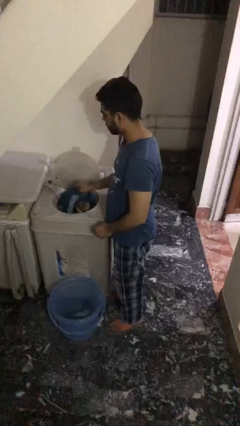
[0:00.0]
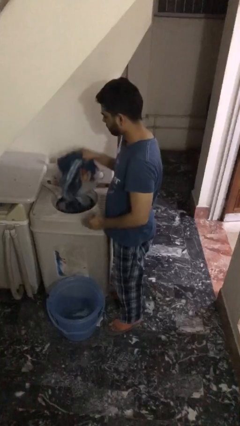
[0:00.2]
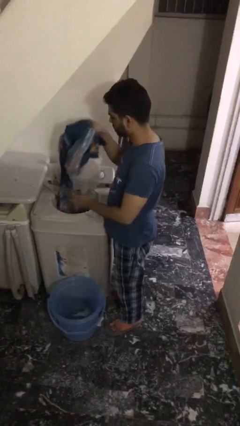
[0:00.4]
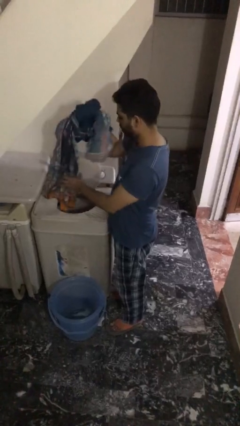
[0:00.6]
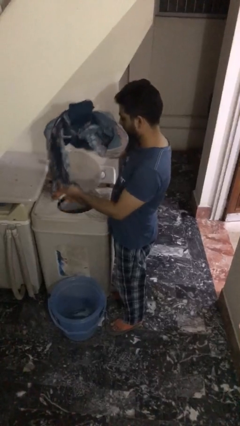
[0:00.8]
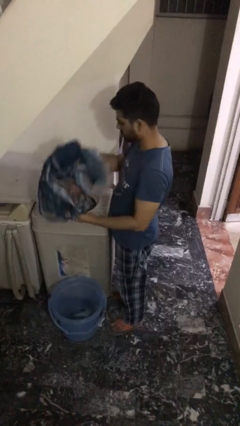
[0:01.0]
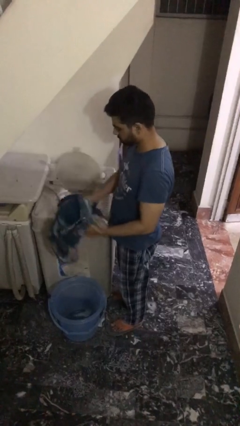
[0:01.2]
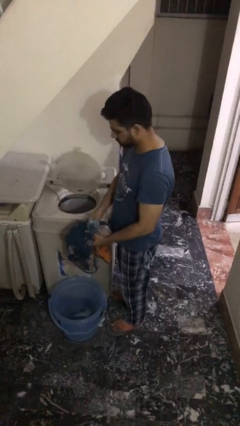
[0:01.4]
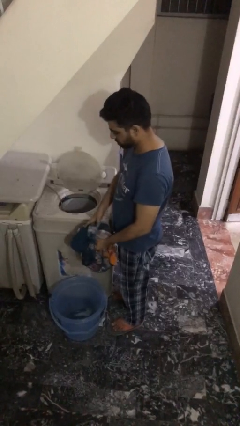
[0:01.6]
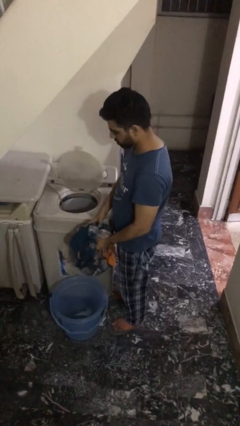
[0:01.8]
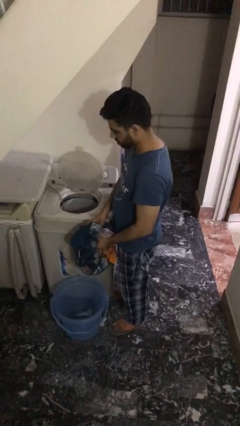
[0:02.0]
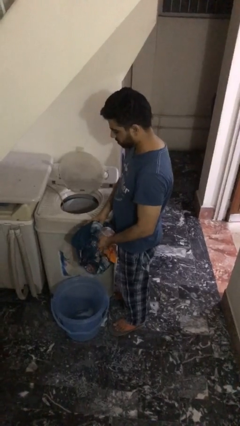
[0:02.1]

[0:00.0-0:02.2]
person unloads clotheswasher

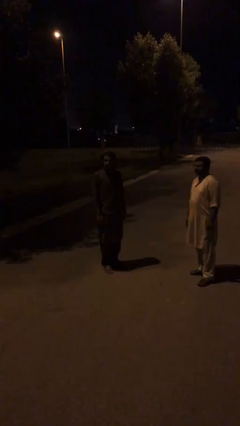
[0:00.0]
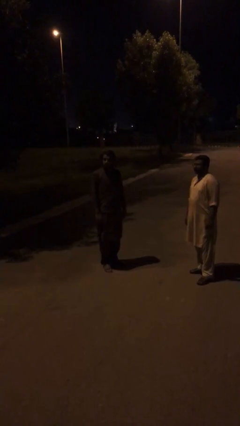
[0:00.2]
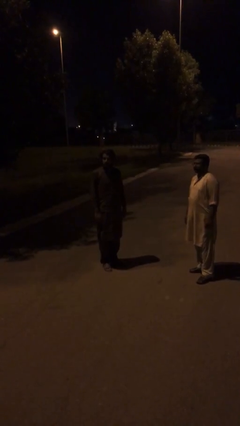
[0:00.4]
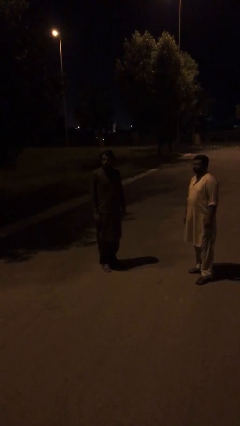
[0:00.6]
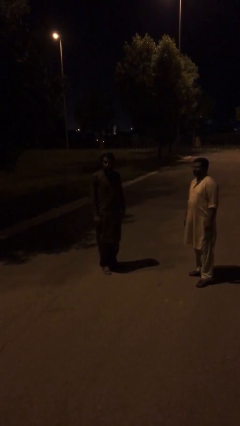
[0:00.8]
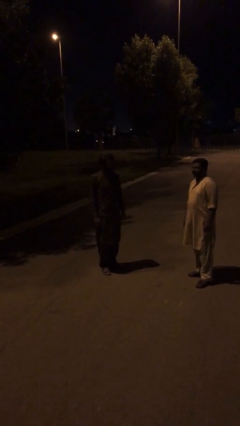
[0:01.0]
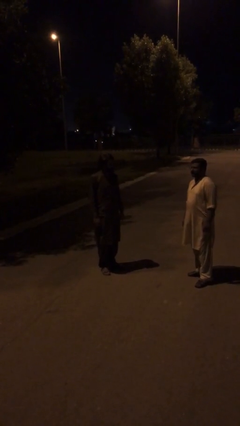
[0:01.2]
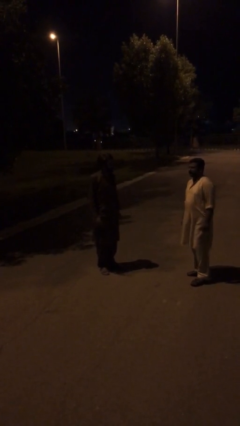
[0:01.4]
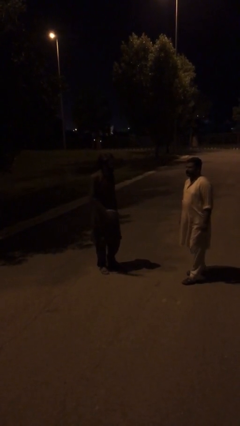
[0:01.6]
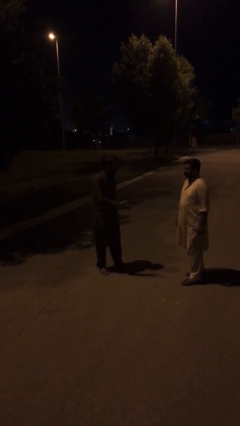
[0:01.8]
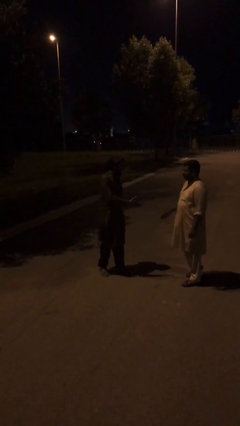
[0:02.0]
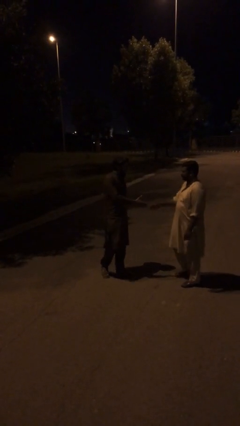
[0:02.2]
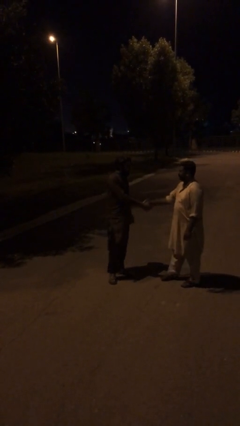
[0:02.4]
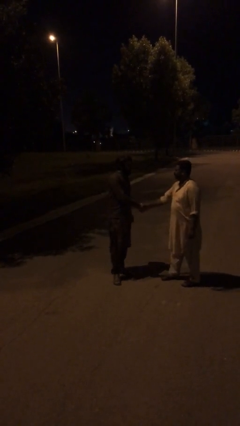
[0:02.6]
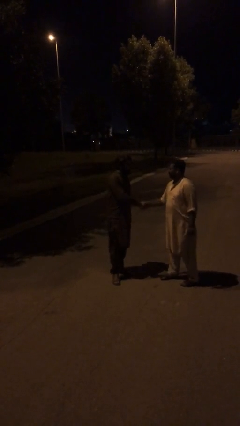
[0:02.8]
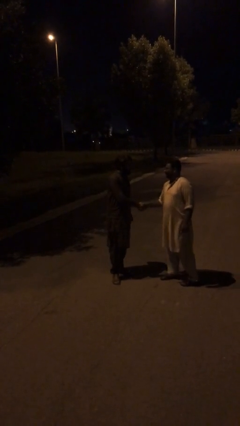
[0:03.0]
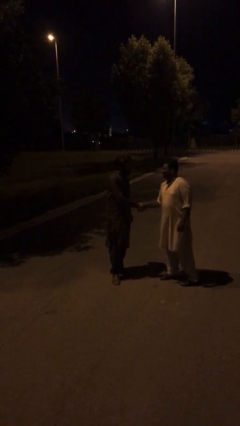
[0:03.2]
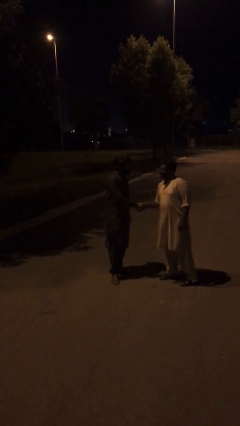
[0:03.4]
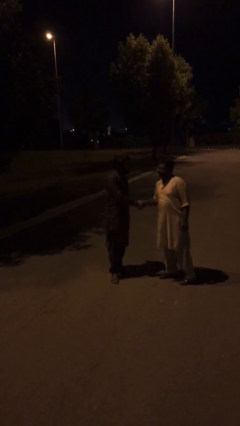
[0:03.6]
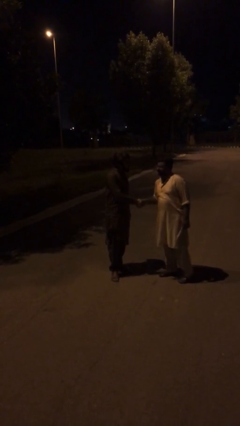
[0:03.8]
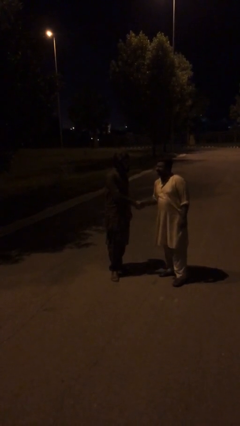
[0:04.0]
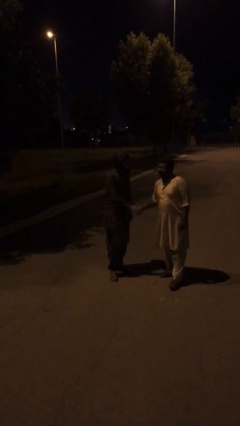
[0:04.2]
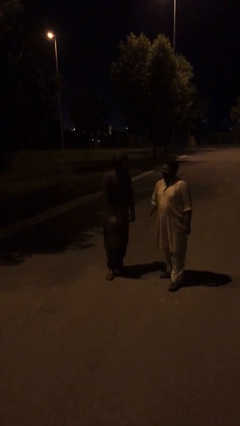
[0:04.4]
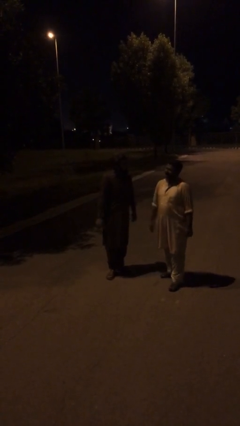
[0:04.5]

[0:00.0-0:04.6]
person shakes hand

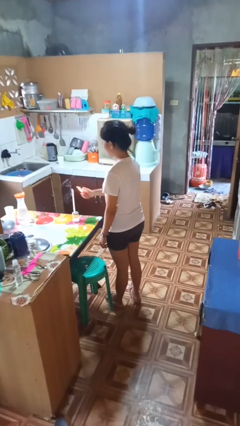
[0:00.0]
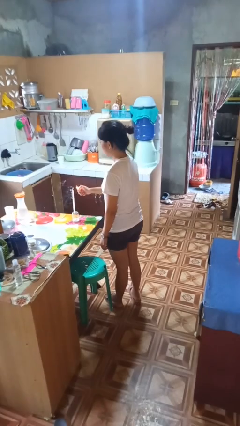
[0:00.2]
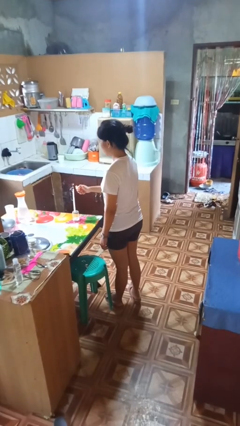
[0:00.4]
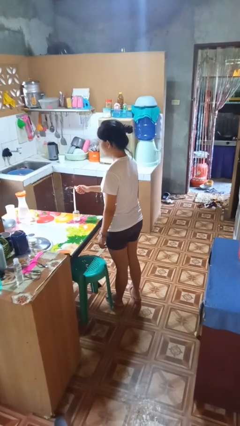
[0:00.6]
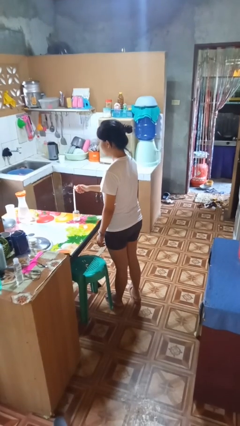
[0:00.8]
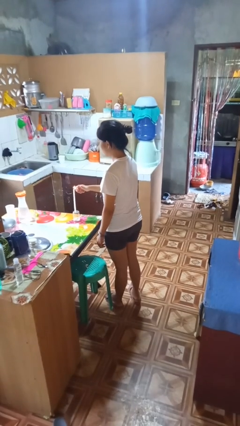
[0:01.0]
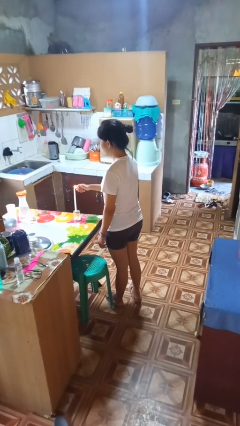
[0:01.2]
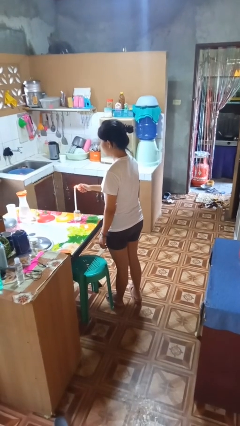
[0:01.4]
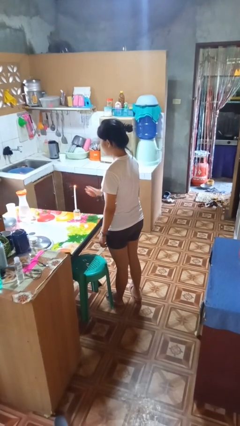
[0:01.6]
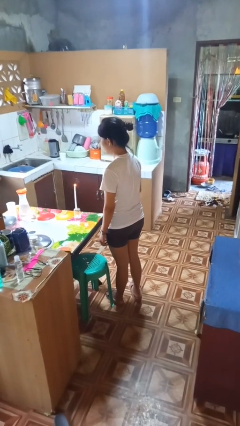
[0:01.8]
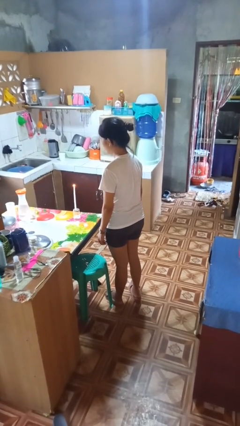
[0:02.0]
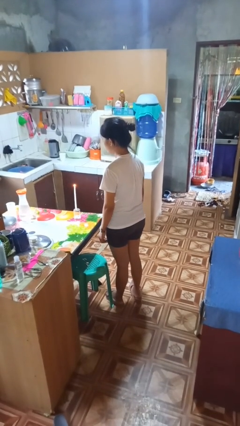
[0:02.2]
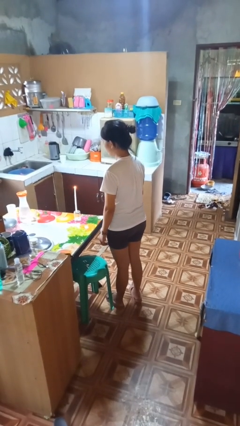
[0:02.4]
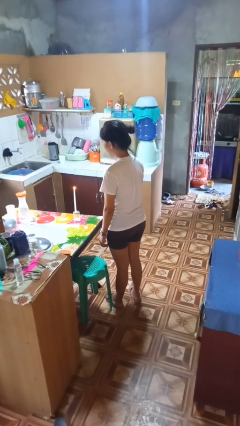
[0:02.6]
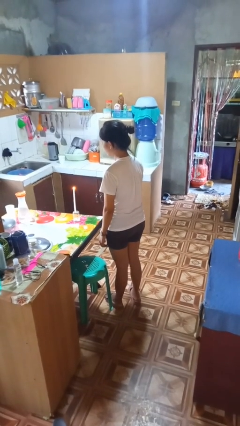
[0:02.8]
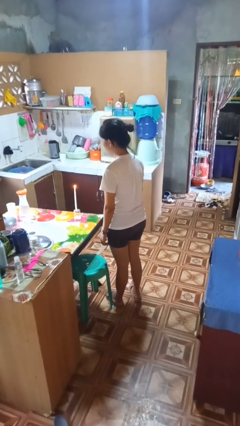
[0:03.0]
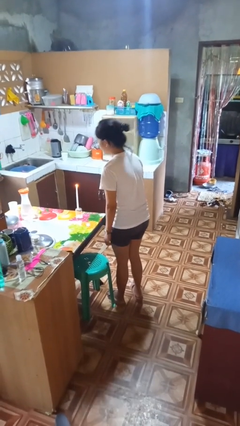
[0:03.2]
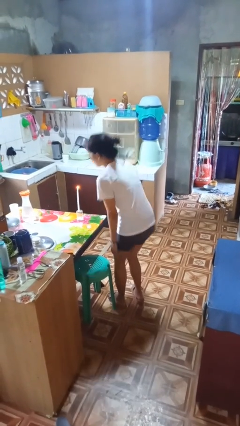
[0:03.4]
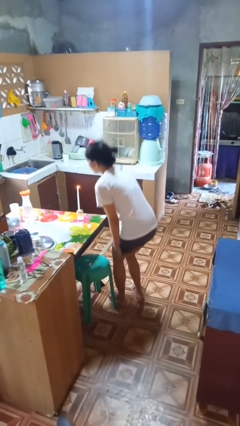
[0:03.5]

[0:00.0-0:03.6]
person lights candle

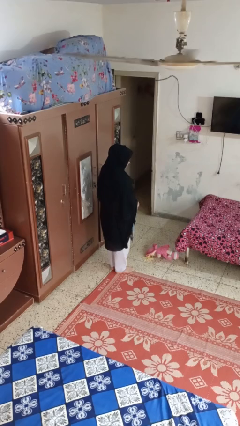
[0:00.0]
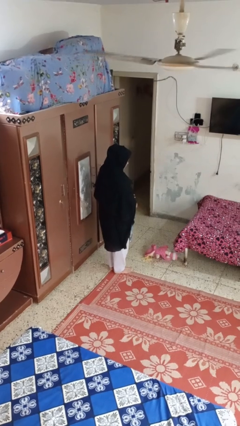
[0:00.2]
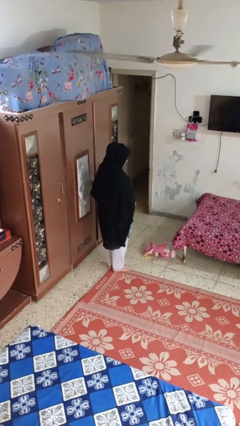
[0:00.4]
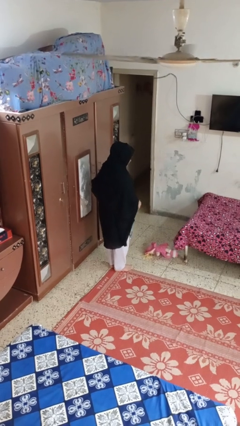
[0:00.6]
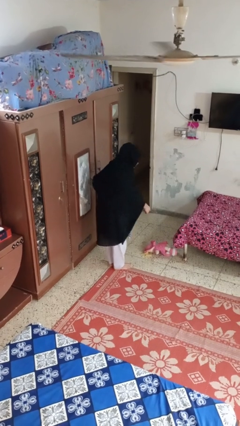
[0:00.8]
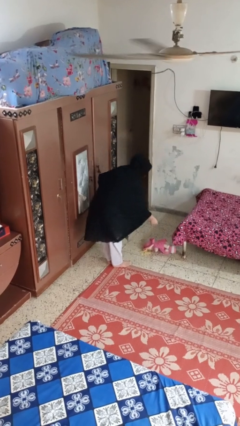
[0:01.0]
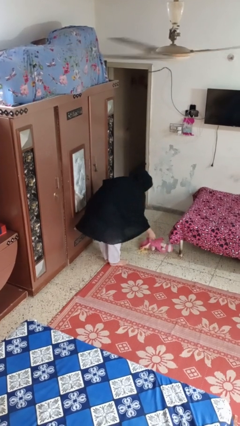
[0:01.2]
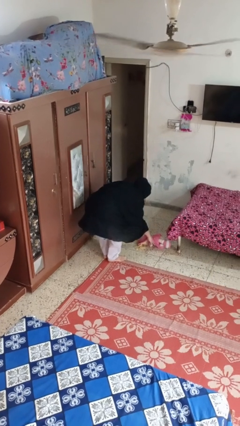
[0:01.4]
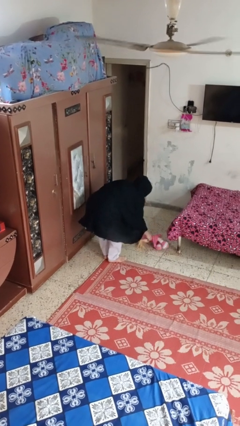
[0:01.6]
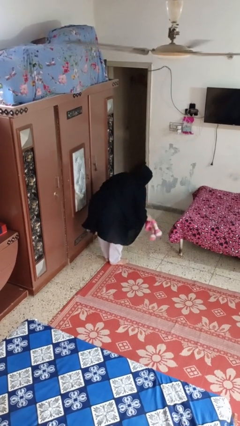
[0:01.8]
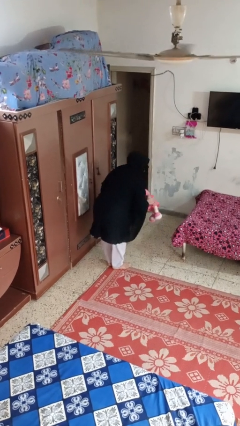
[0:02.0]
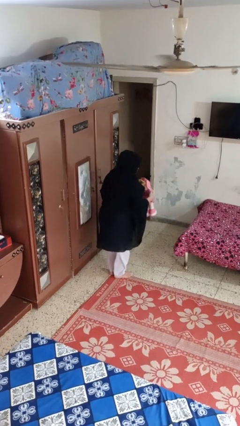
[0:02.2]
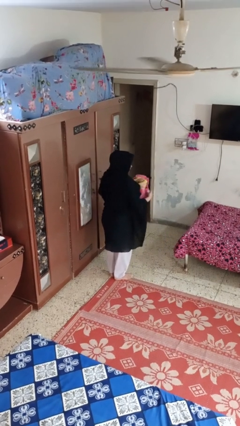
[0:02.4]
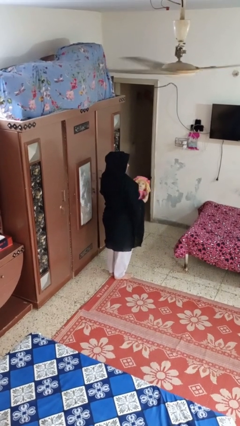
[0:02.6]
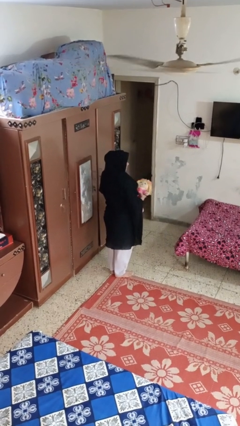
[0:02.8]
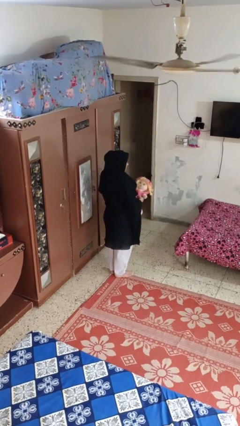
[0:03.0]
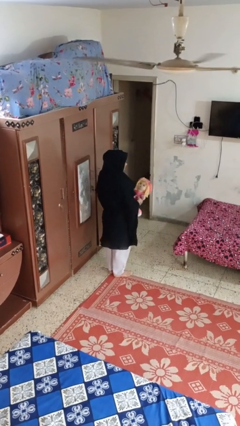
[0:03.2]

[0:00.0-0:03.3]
person picks up object from floor

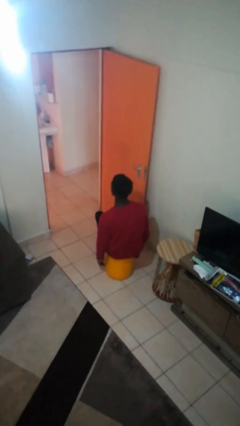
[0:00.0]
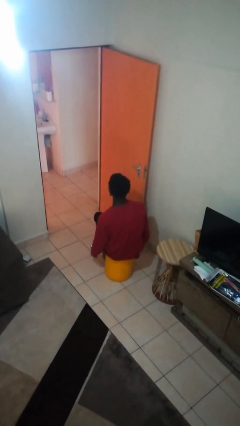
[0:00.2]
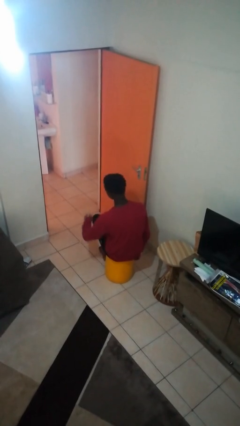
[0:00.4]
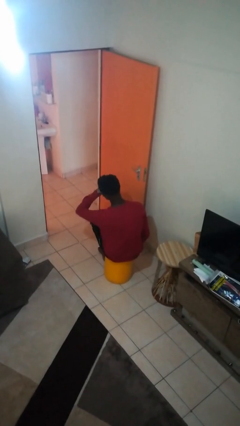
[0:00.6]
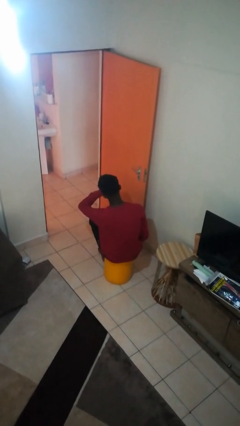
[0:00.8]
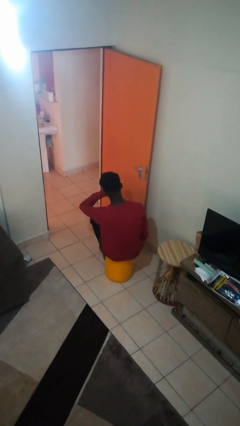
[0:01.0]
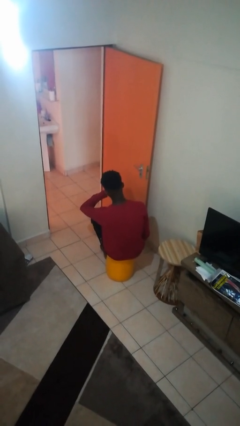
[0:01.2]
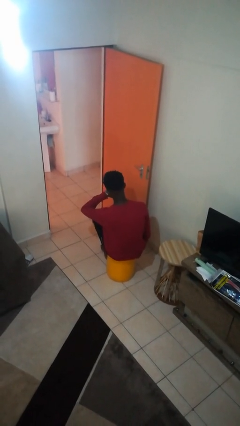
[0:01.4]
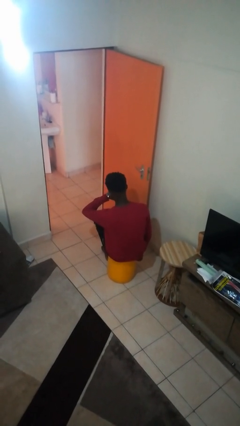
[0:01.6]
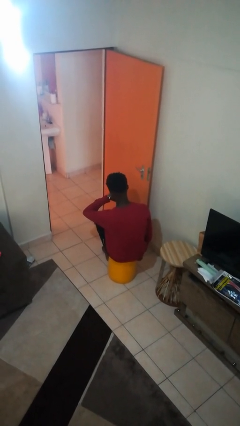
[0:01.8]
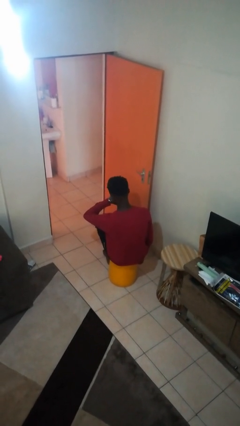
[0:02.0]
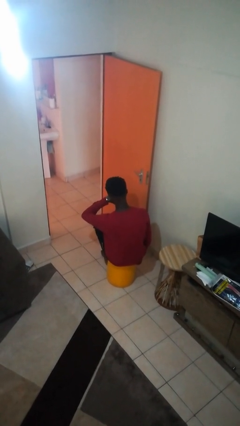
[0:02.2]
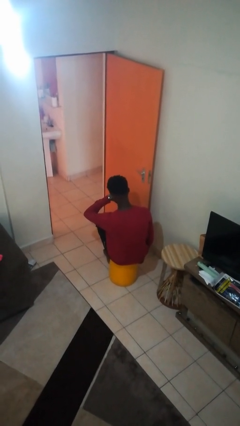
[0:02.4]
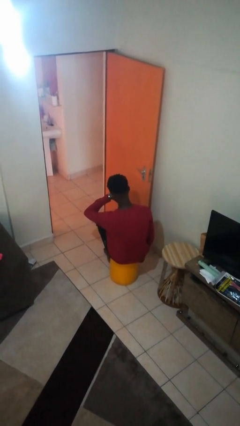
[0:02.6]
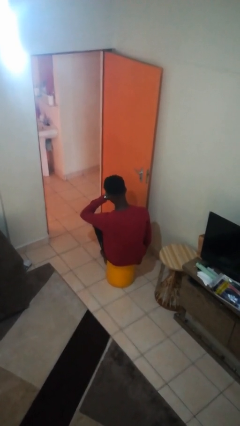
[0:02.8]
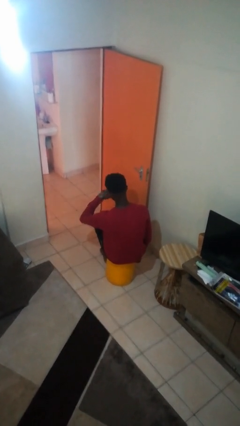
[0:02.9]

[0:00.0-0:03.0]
person looks at wristwatch

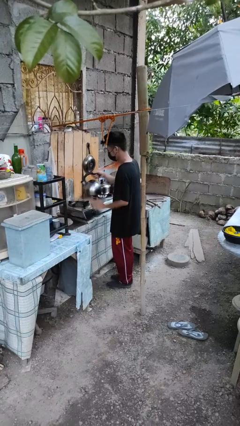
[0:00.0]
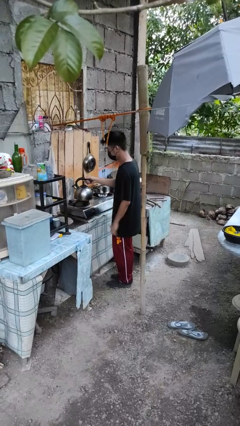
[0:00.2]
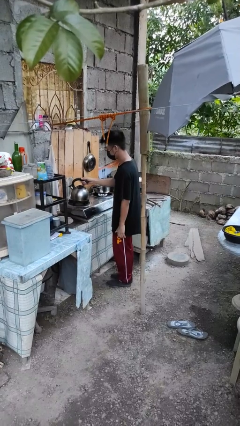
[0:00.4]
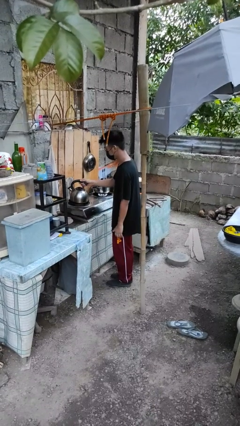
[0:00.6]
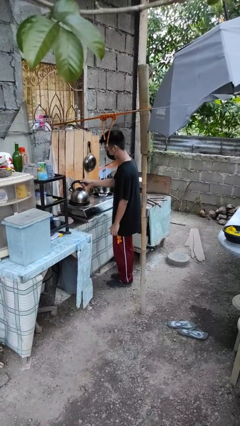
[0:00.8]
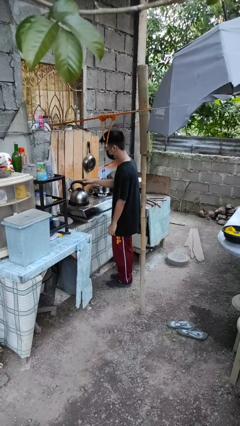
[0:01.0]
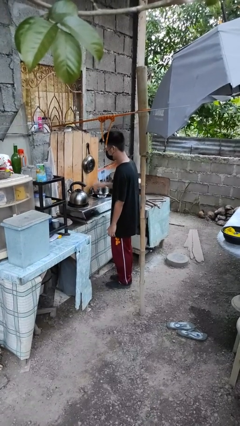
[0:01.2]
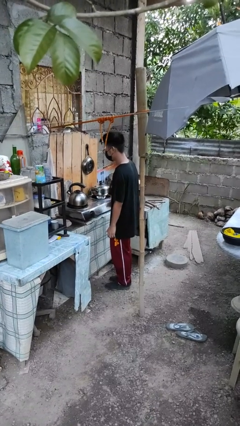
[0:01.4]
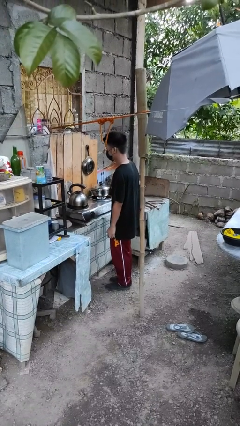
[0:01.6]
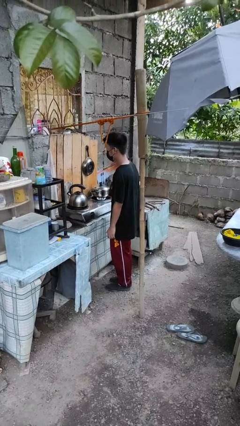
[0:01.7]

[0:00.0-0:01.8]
person puts down object on countertop
